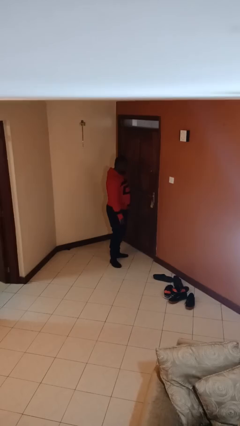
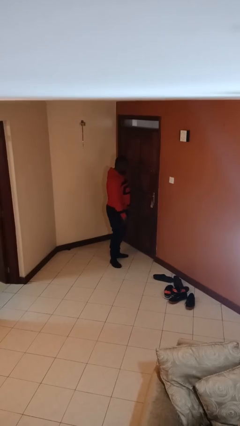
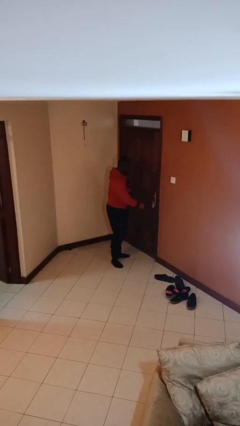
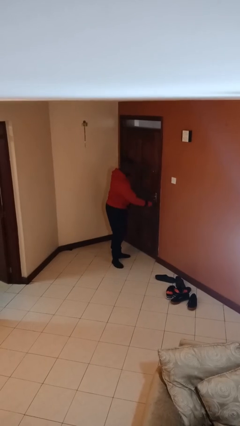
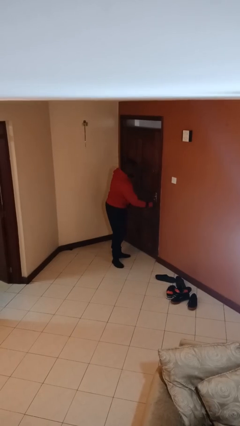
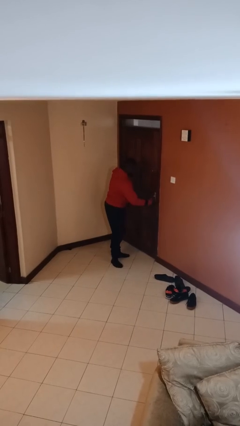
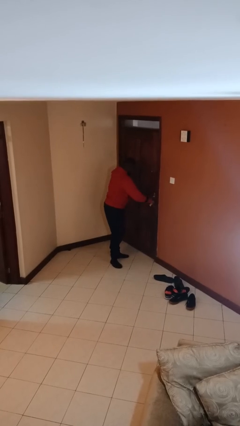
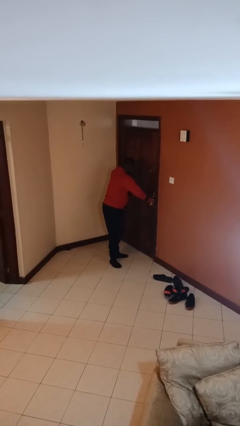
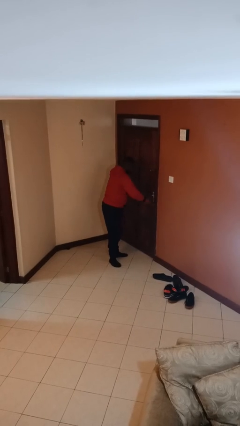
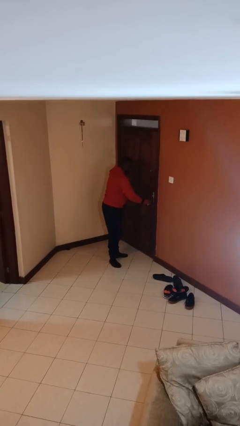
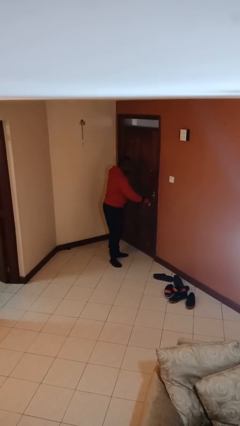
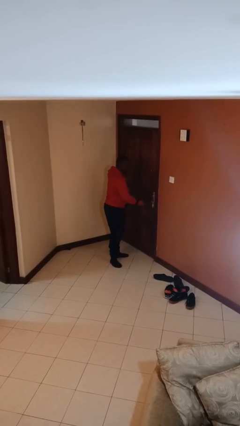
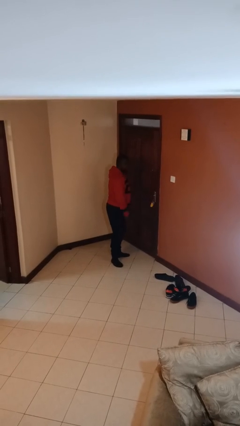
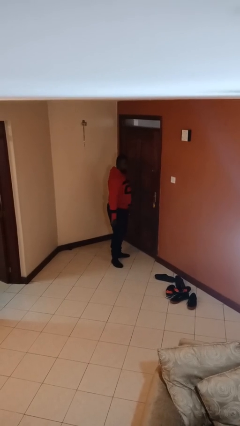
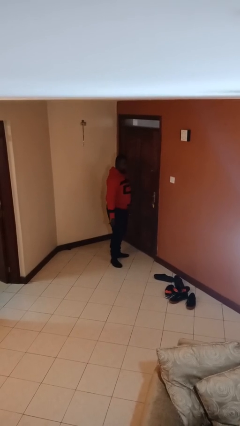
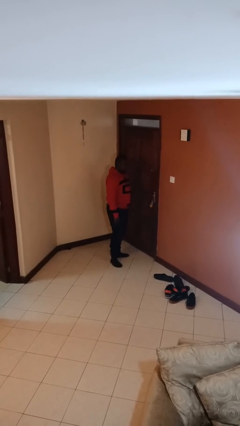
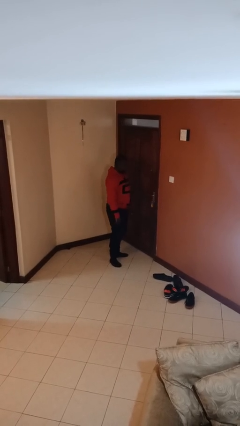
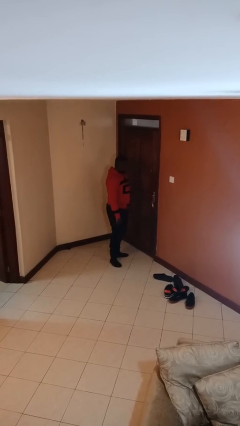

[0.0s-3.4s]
person unlocks door with keys

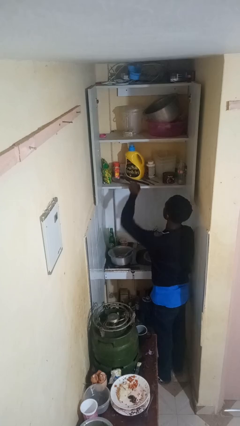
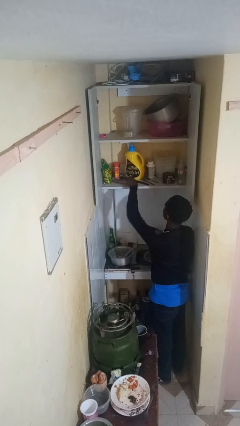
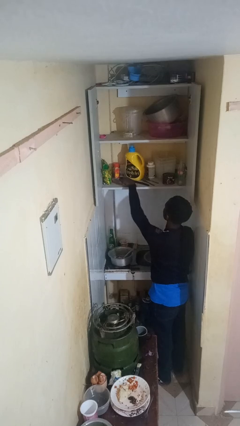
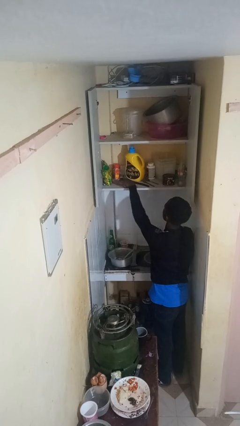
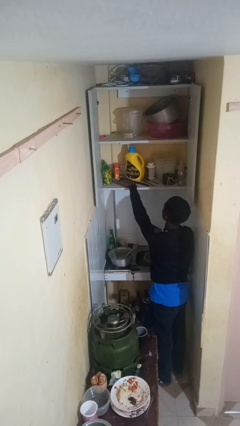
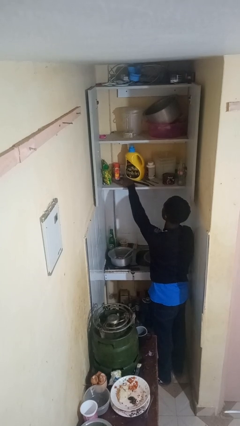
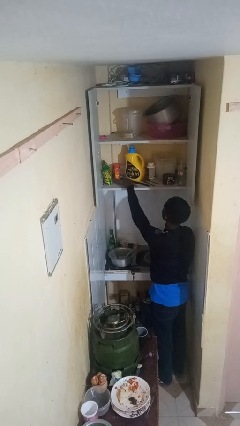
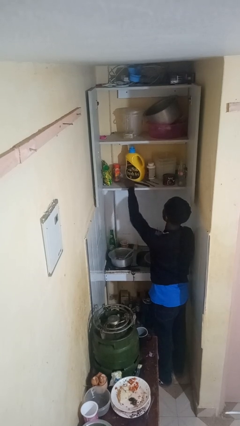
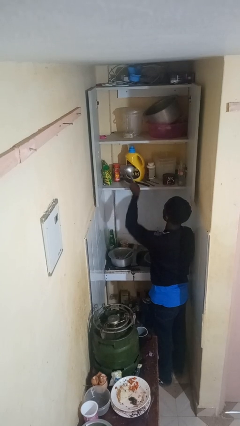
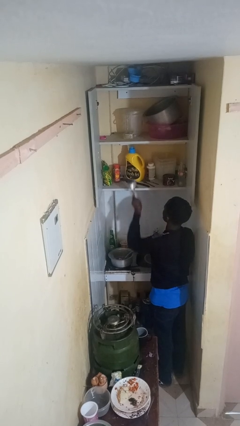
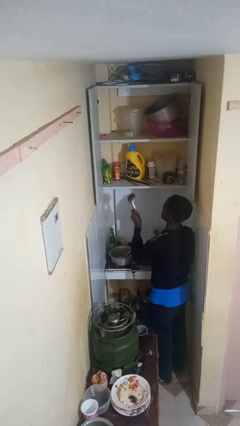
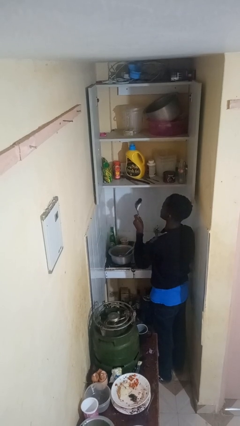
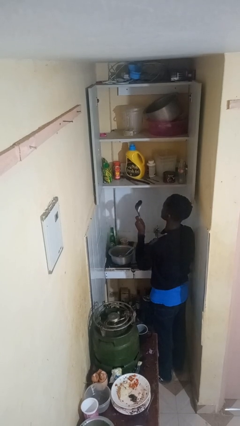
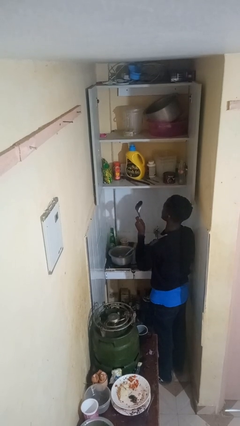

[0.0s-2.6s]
person takes object from kitchen drawer

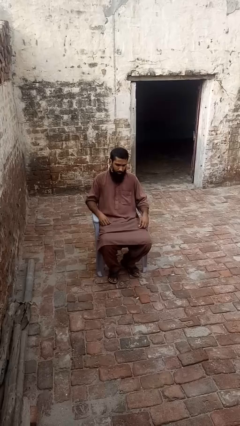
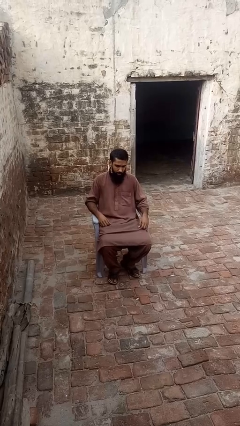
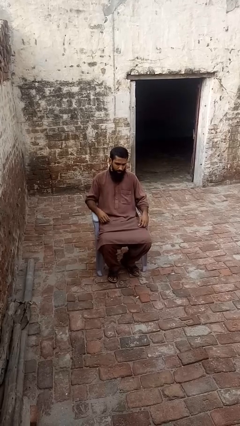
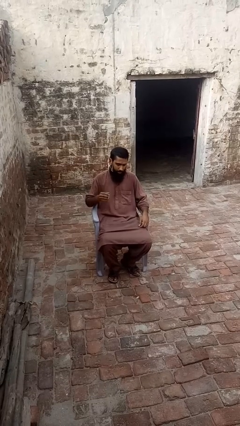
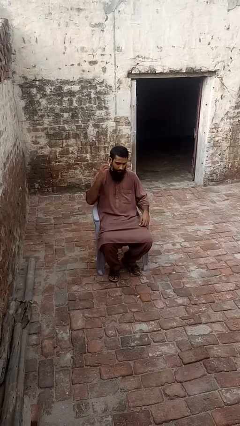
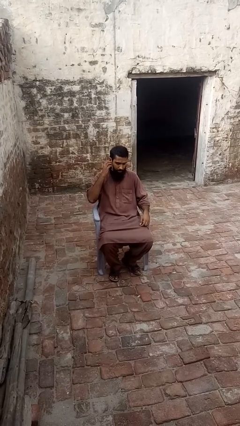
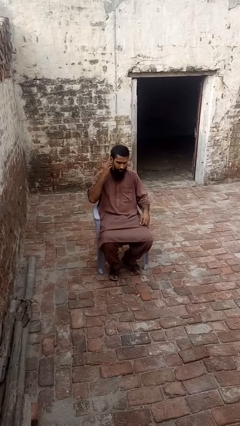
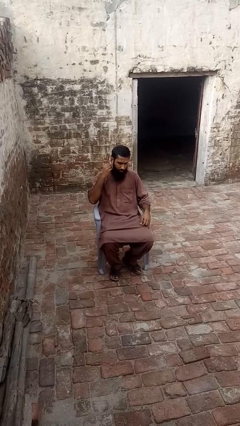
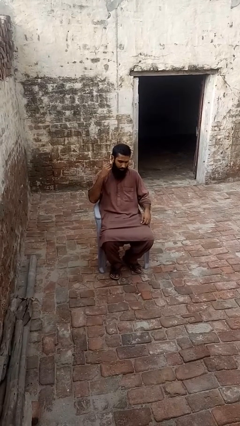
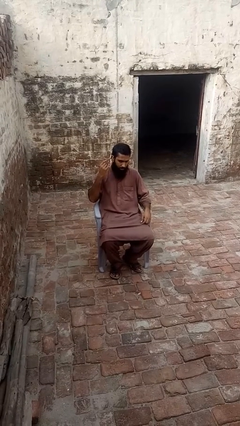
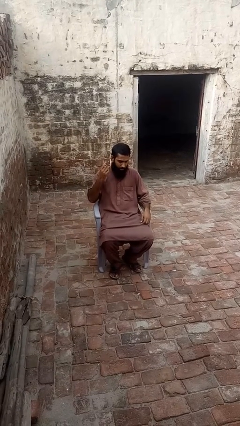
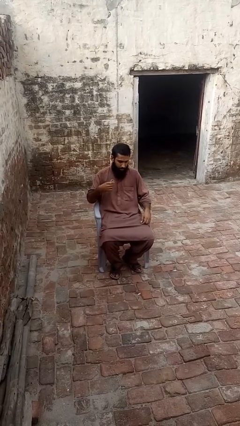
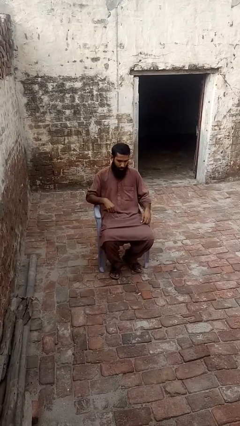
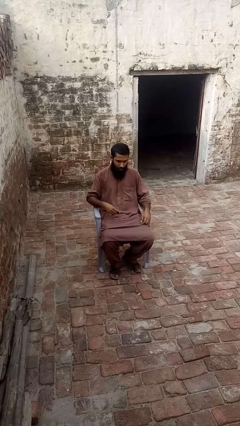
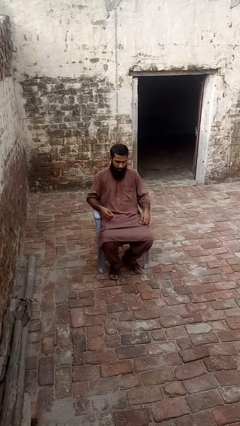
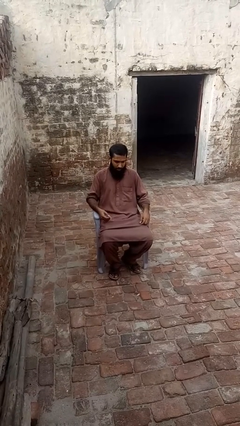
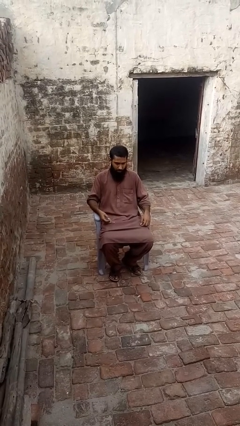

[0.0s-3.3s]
person takes off earrings

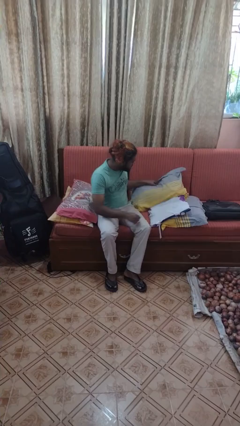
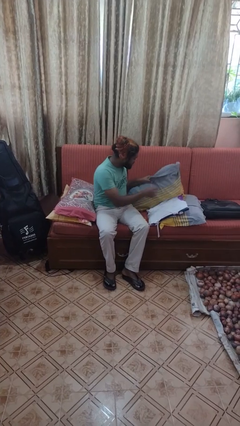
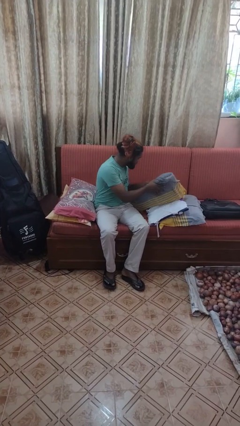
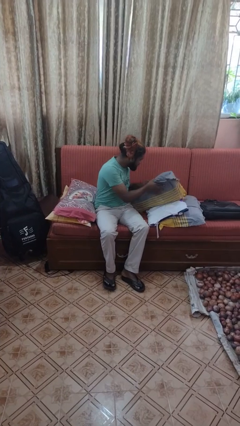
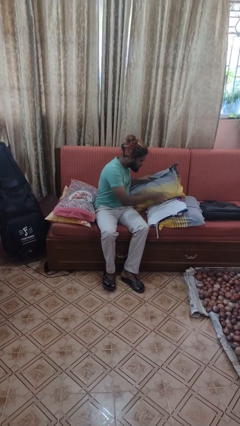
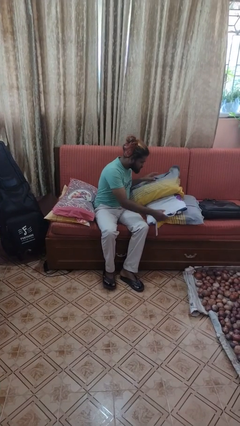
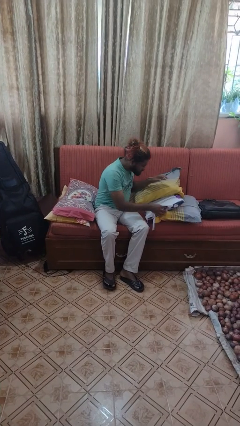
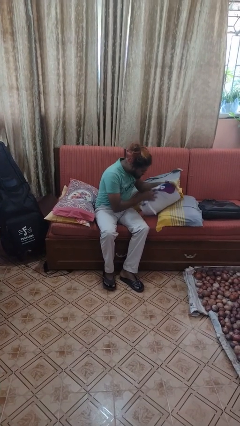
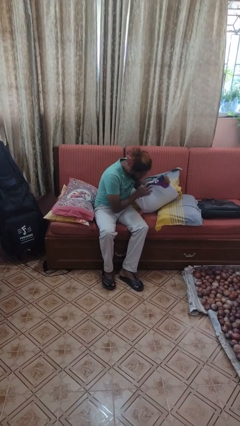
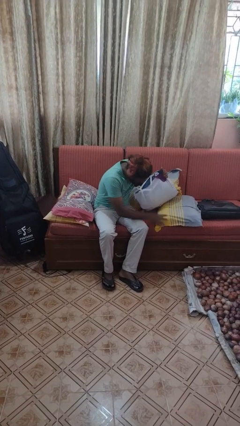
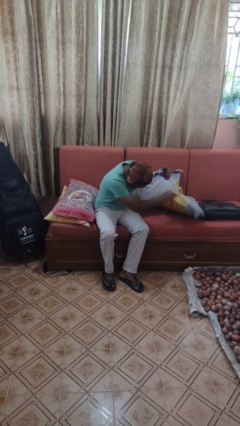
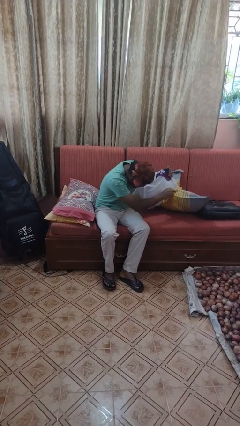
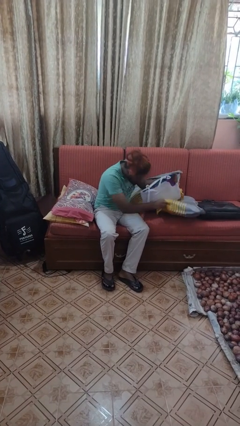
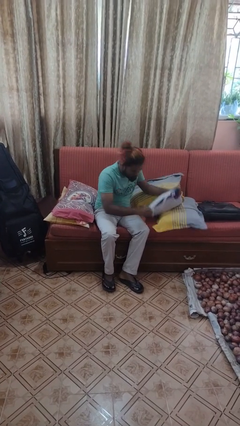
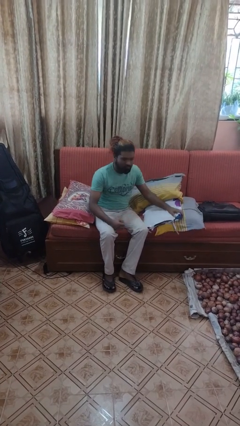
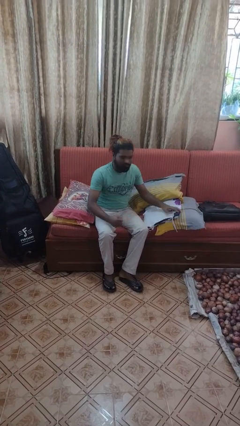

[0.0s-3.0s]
person searches in couch

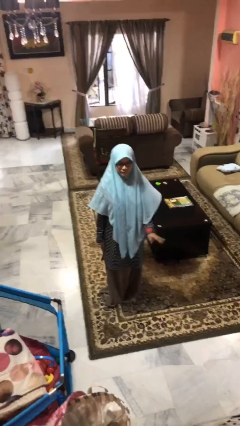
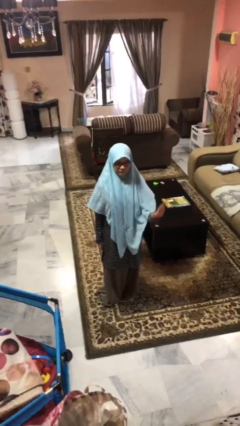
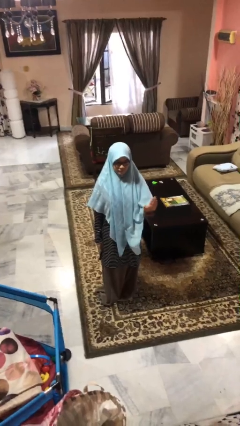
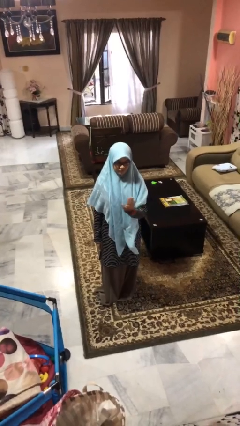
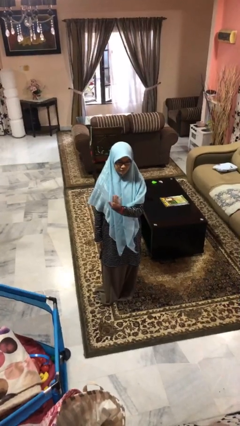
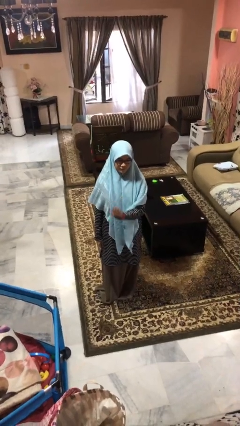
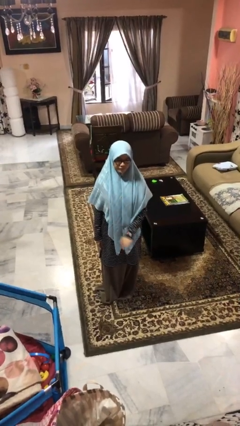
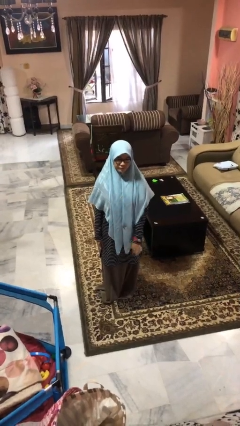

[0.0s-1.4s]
person gestures swipe right

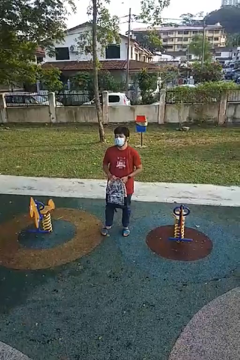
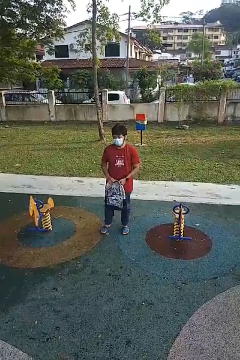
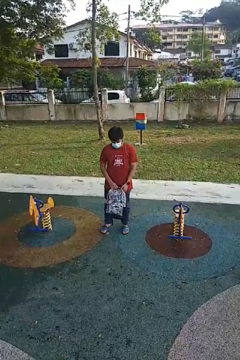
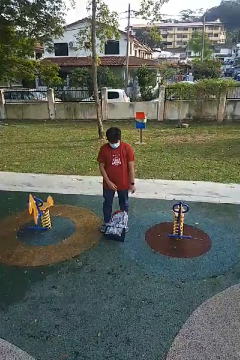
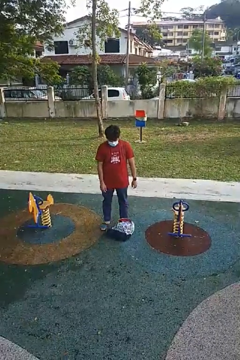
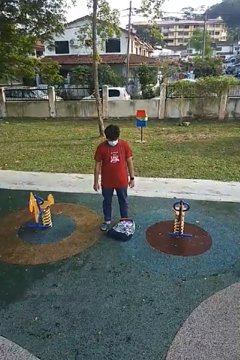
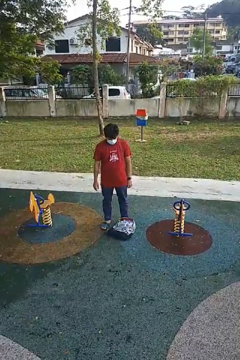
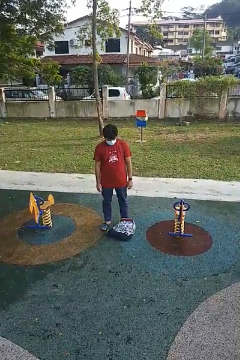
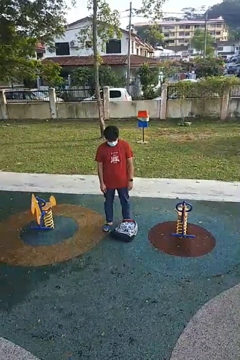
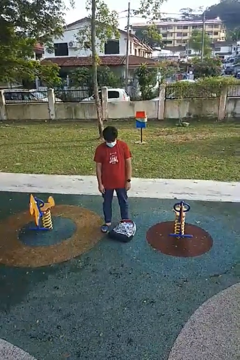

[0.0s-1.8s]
person drops object

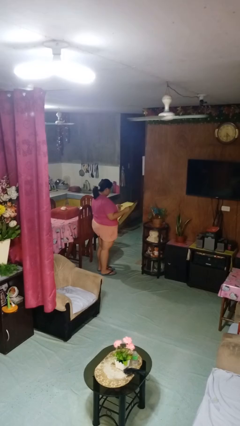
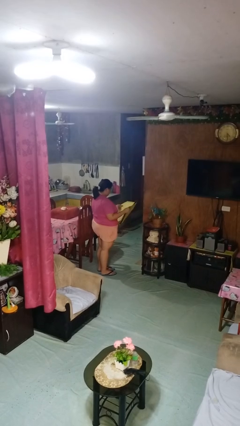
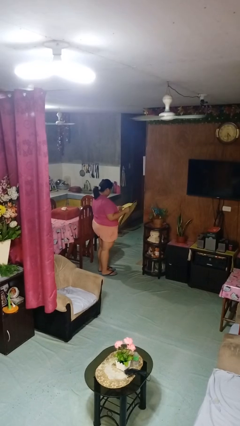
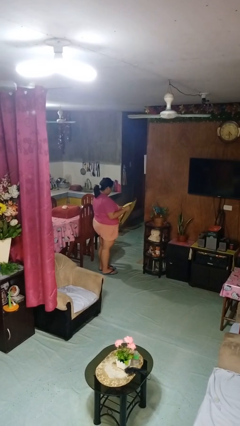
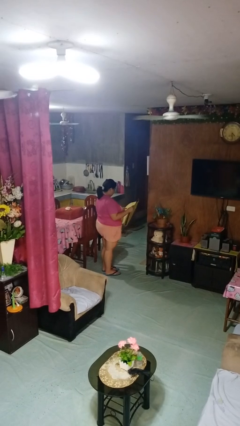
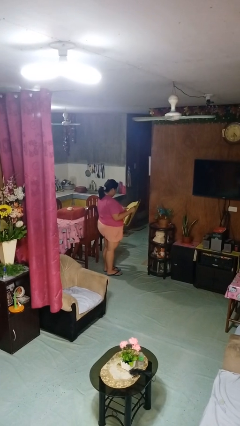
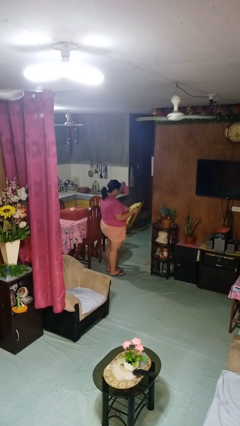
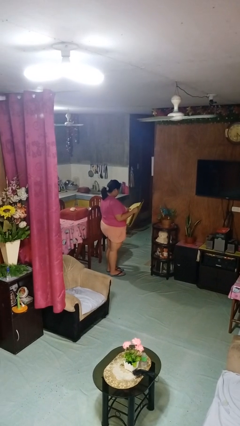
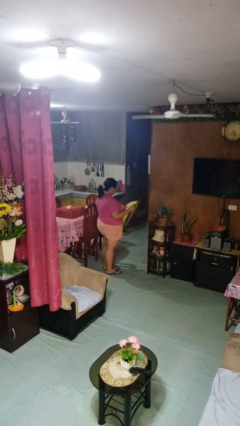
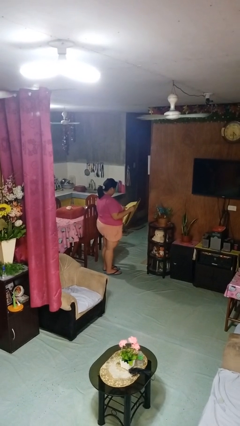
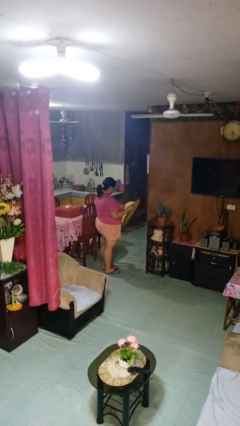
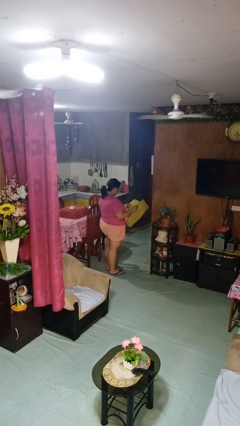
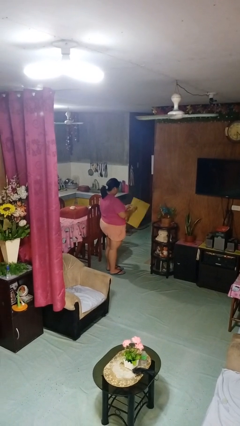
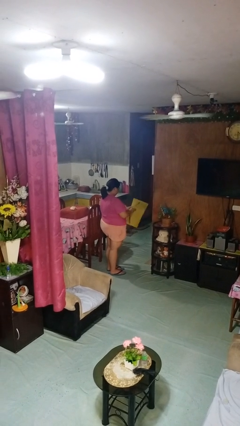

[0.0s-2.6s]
person reads newspaper
